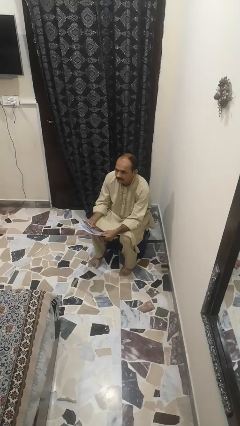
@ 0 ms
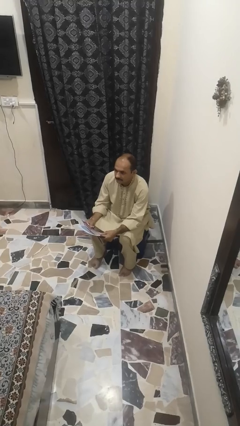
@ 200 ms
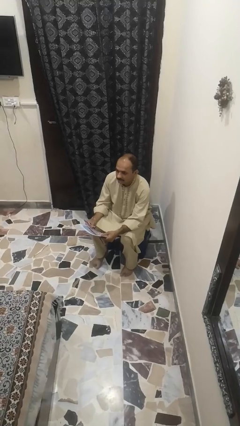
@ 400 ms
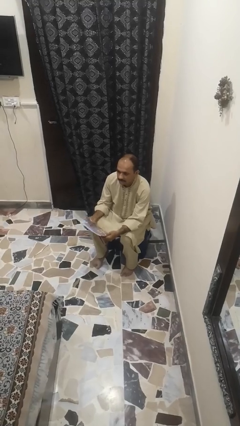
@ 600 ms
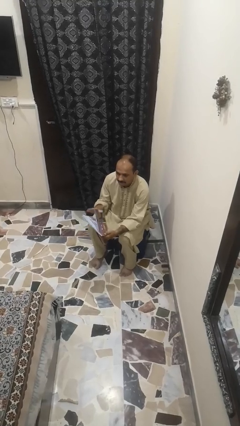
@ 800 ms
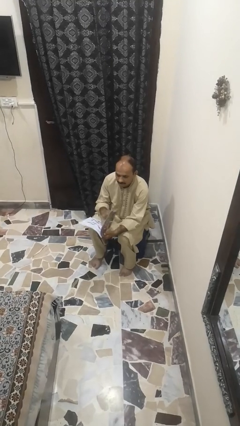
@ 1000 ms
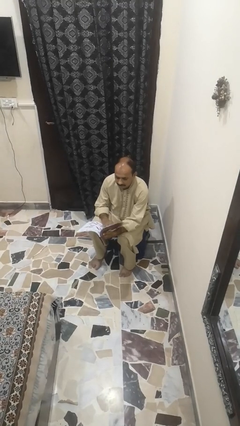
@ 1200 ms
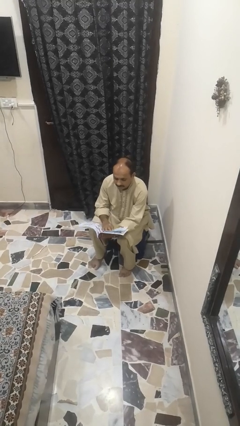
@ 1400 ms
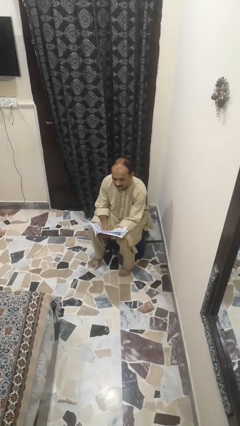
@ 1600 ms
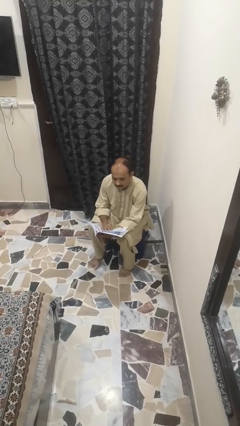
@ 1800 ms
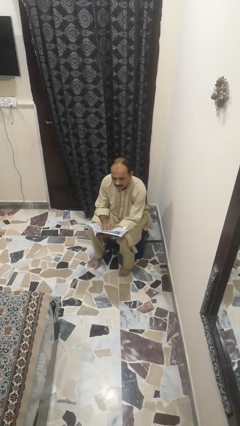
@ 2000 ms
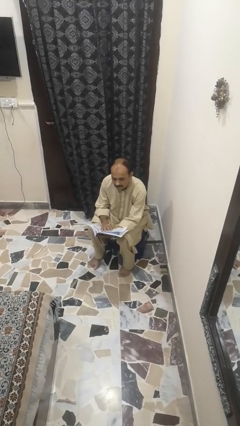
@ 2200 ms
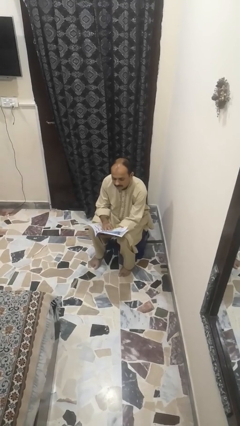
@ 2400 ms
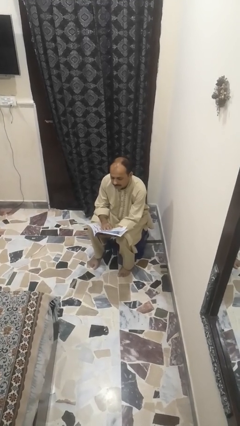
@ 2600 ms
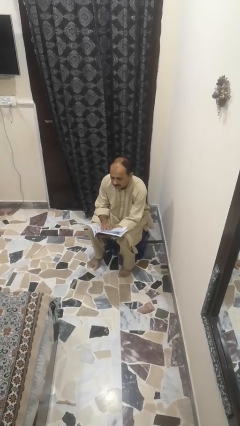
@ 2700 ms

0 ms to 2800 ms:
person reads magazine

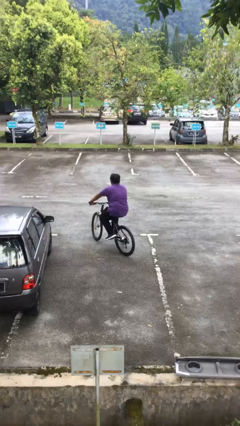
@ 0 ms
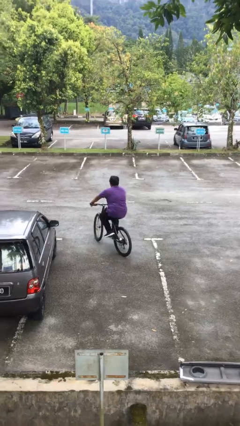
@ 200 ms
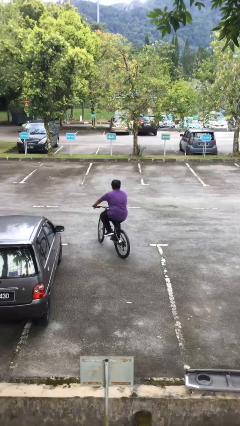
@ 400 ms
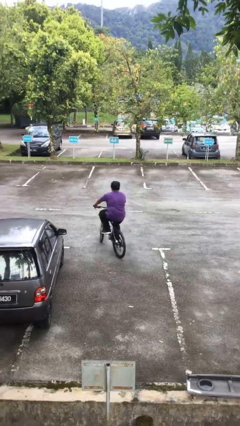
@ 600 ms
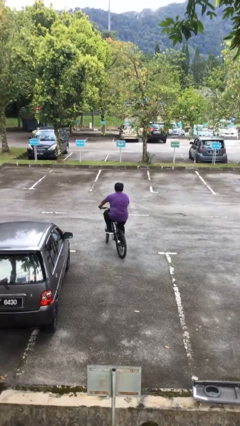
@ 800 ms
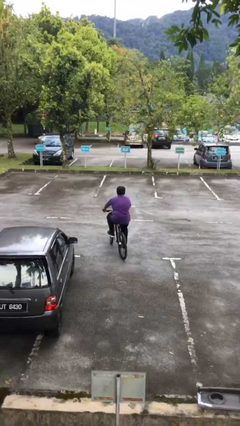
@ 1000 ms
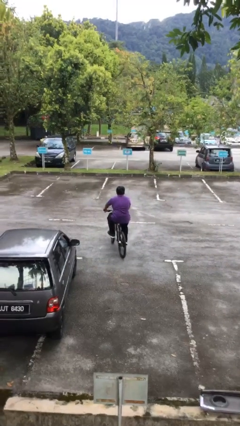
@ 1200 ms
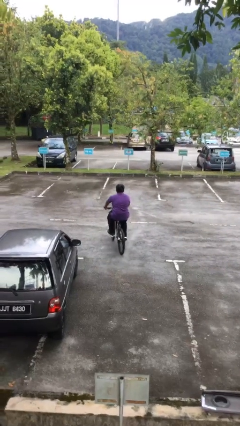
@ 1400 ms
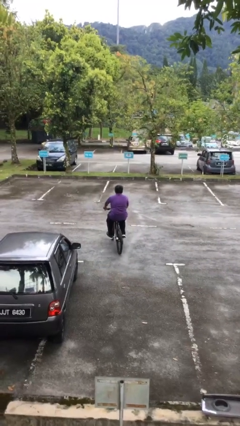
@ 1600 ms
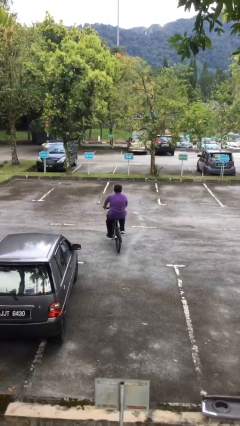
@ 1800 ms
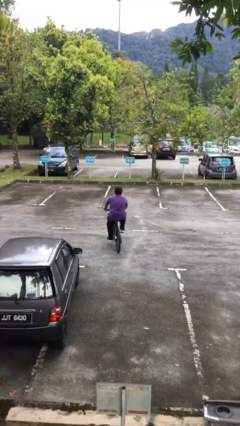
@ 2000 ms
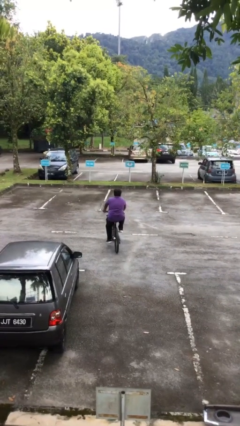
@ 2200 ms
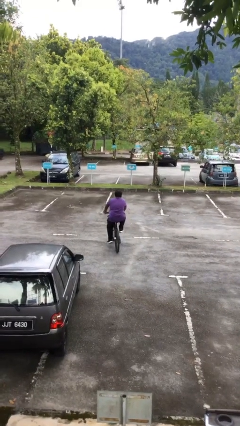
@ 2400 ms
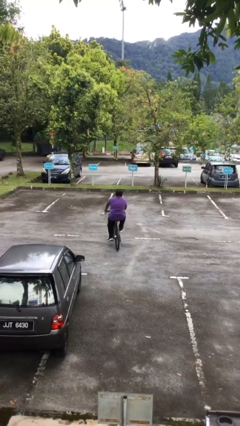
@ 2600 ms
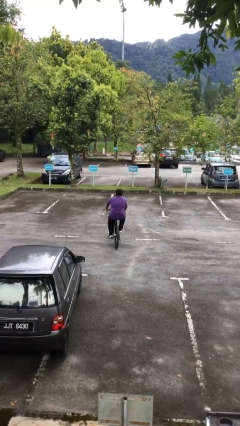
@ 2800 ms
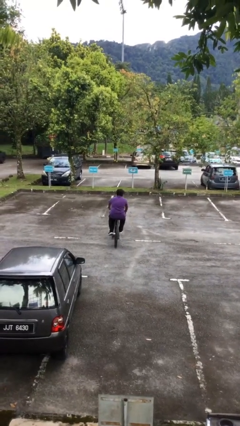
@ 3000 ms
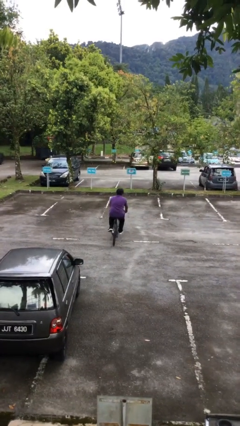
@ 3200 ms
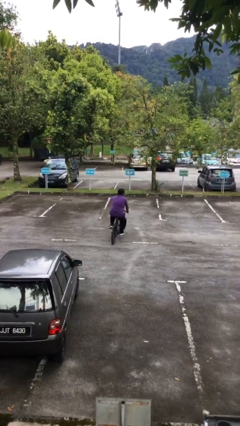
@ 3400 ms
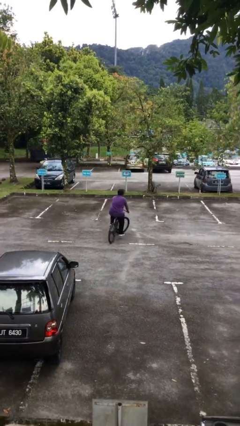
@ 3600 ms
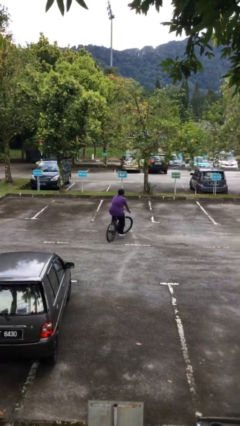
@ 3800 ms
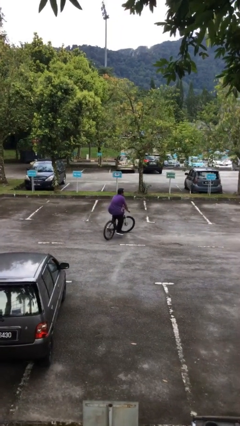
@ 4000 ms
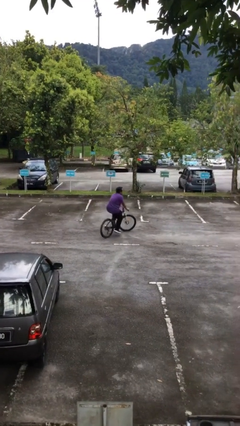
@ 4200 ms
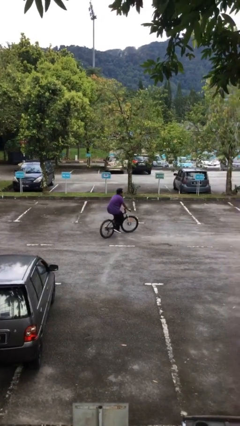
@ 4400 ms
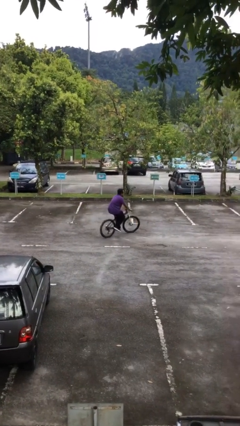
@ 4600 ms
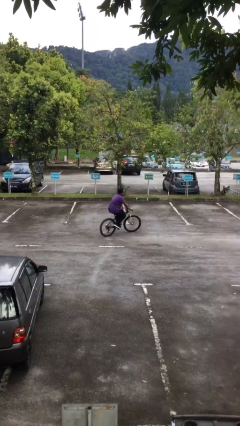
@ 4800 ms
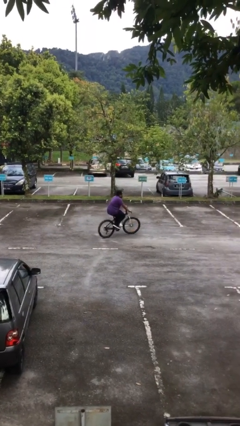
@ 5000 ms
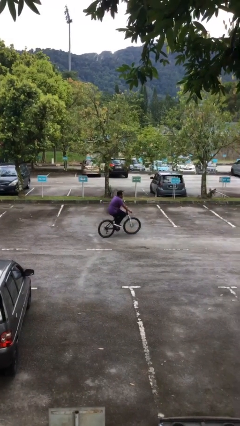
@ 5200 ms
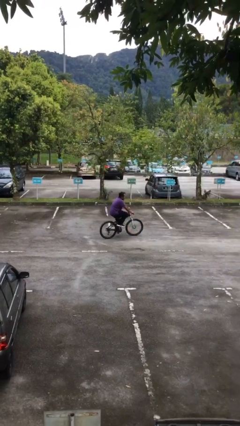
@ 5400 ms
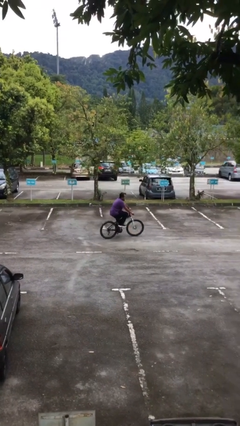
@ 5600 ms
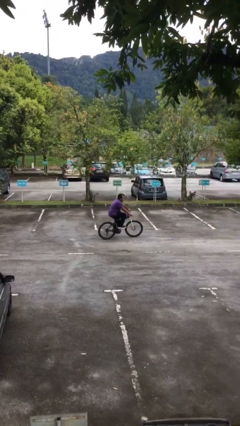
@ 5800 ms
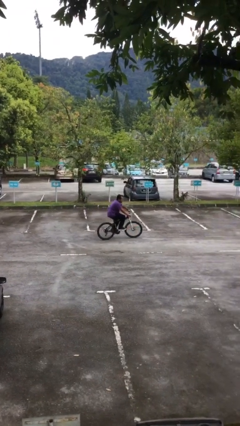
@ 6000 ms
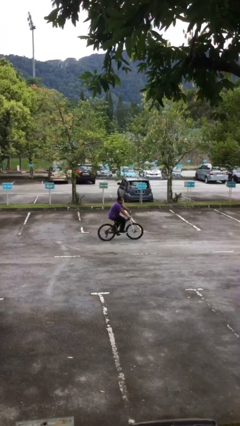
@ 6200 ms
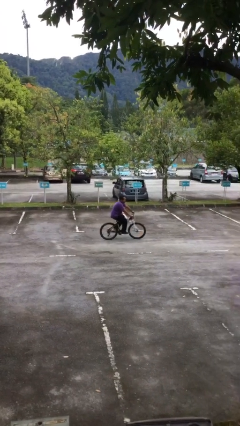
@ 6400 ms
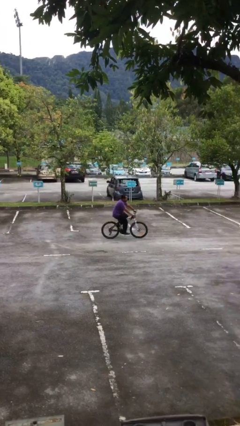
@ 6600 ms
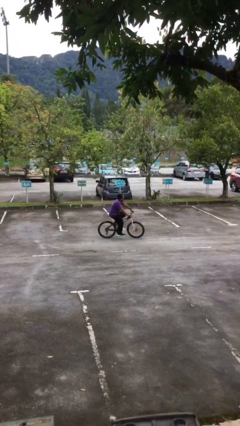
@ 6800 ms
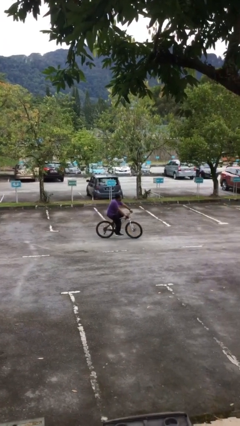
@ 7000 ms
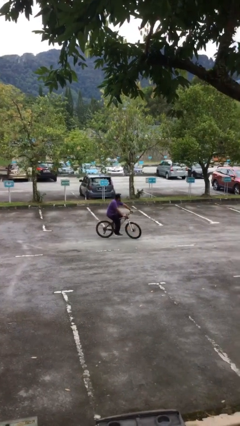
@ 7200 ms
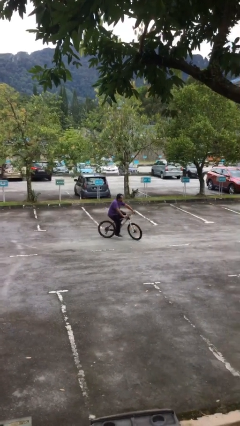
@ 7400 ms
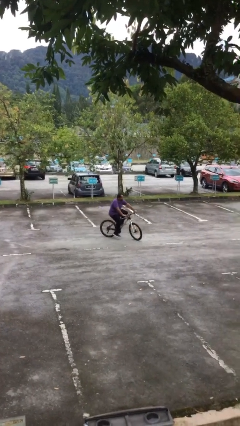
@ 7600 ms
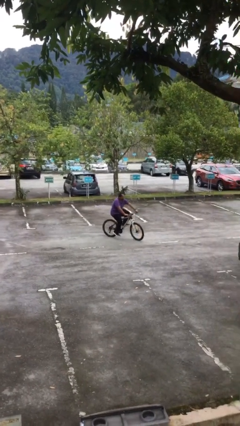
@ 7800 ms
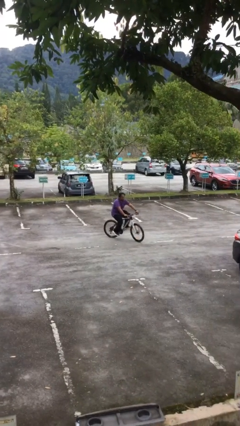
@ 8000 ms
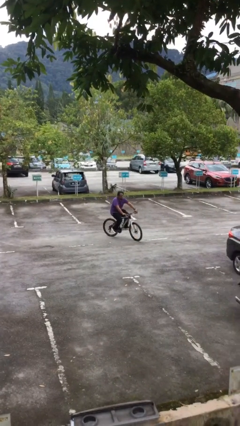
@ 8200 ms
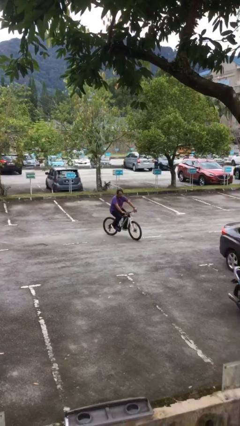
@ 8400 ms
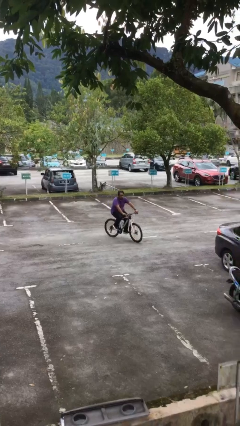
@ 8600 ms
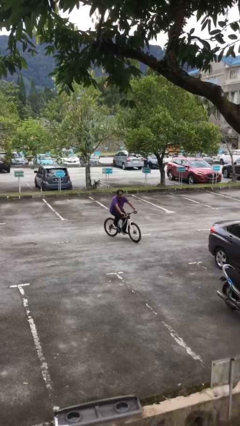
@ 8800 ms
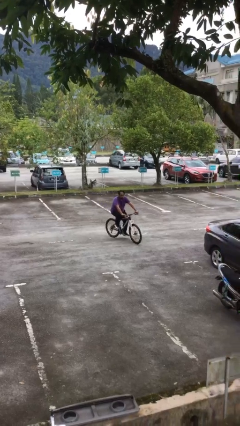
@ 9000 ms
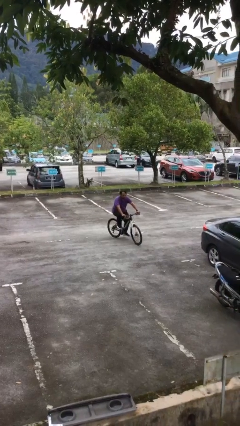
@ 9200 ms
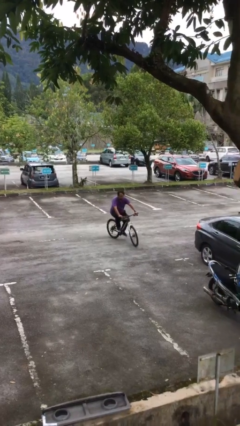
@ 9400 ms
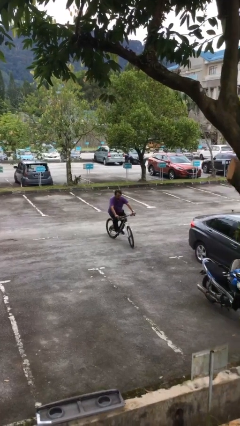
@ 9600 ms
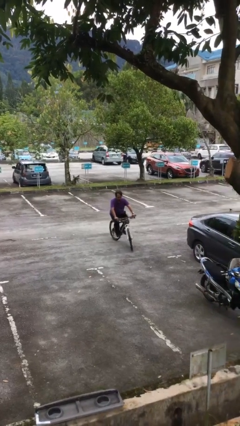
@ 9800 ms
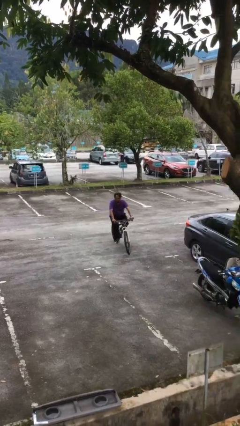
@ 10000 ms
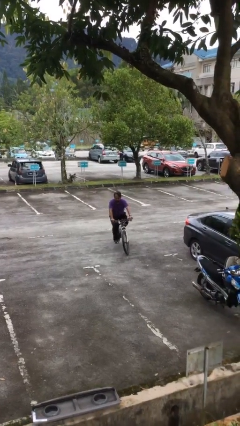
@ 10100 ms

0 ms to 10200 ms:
person rides bicycle

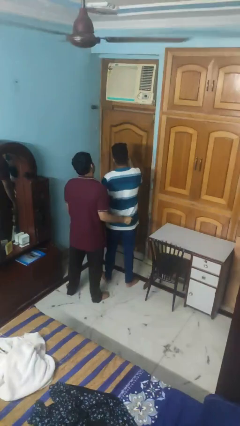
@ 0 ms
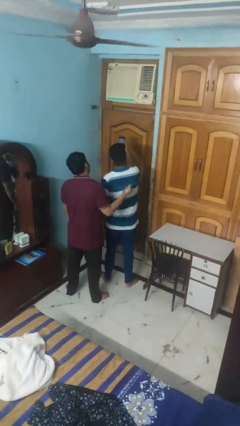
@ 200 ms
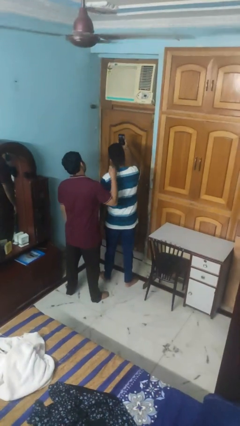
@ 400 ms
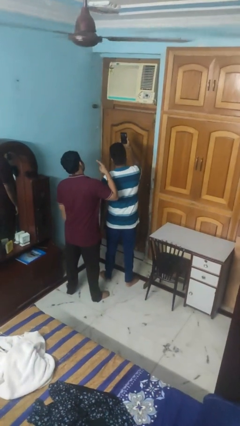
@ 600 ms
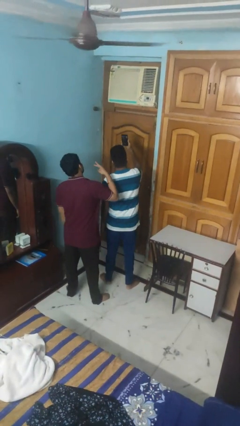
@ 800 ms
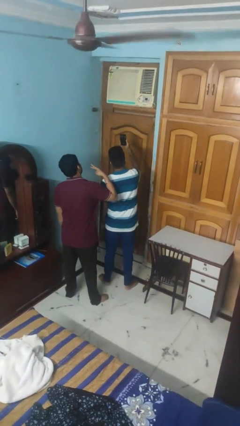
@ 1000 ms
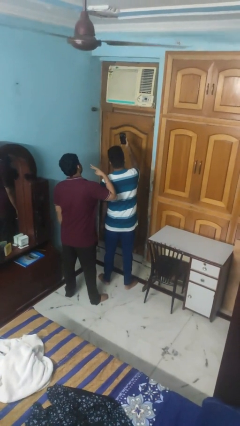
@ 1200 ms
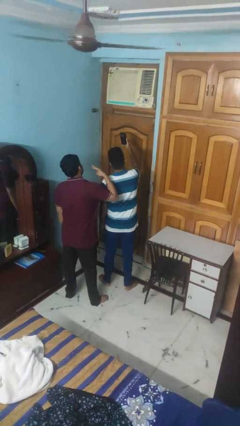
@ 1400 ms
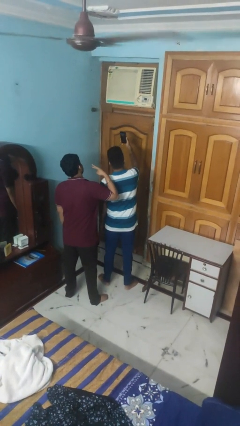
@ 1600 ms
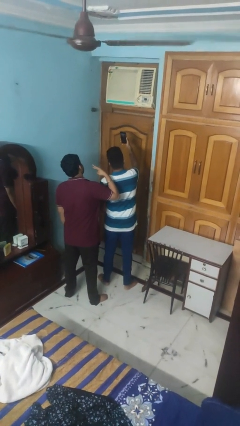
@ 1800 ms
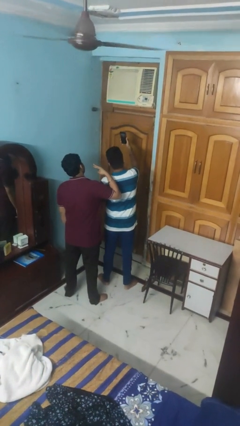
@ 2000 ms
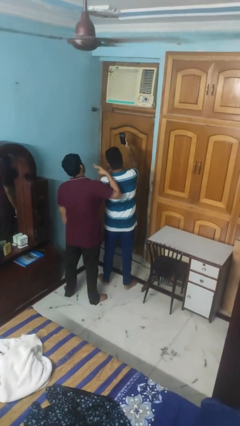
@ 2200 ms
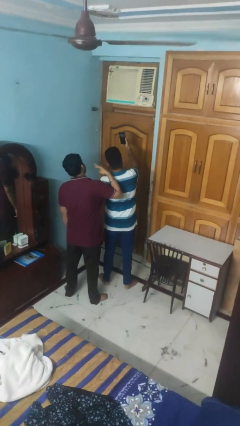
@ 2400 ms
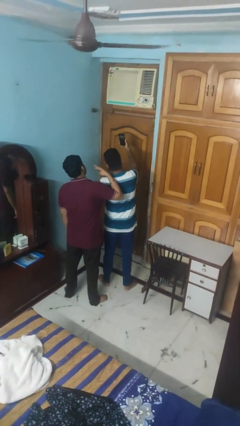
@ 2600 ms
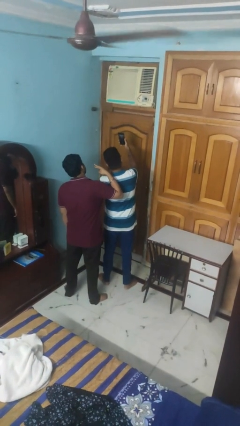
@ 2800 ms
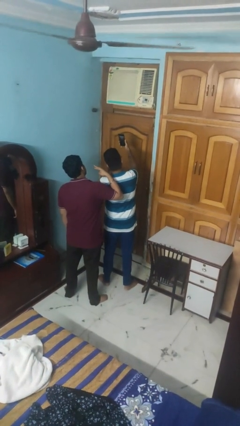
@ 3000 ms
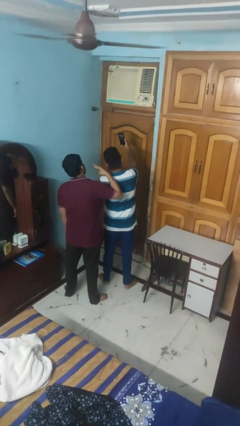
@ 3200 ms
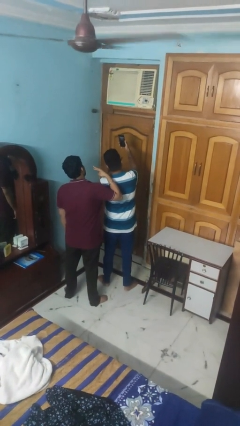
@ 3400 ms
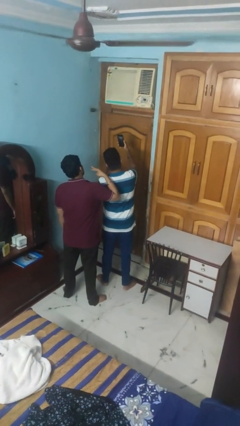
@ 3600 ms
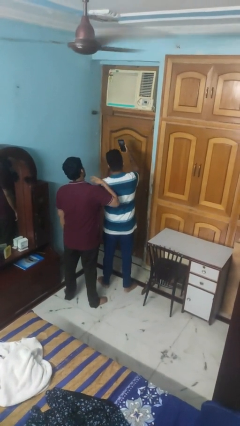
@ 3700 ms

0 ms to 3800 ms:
person takes selfie with person

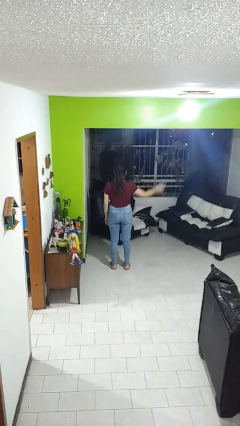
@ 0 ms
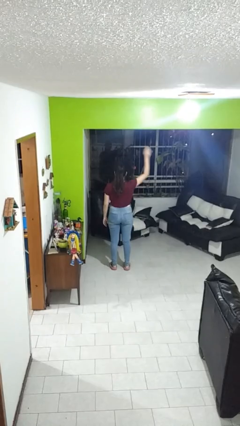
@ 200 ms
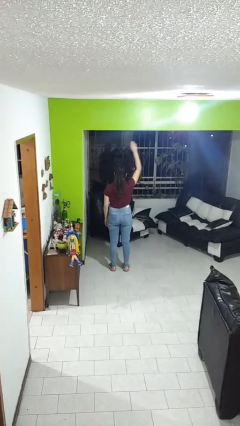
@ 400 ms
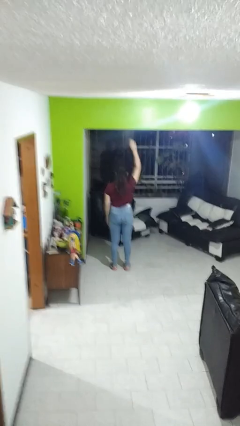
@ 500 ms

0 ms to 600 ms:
person gestures raise hand
